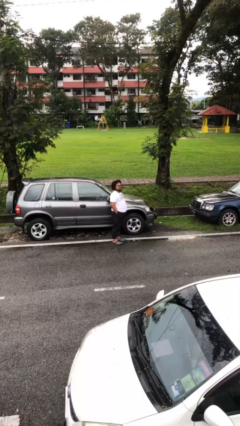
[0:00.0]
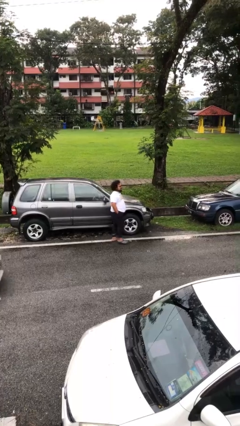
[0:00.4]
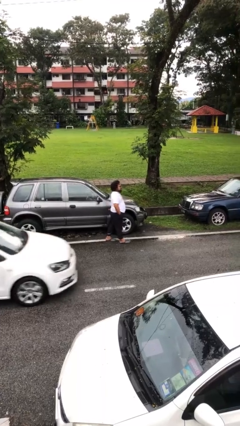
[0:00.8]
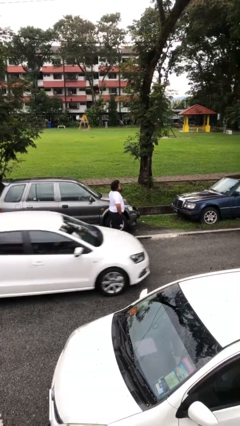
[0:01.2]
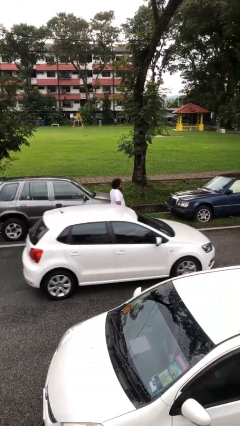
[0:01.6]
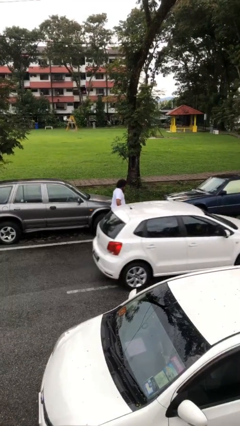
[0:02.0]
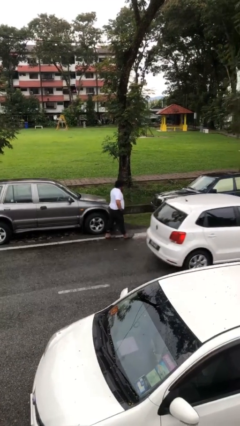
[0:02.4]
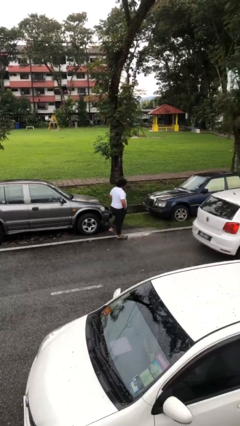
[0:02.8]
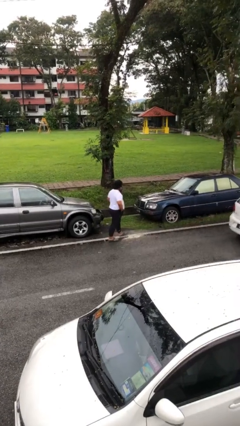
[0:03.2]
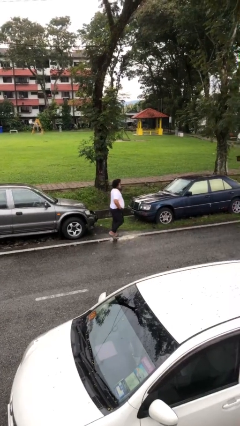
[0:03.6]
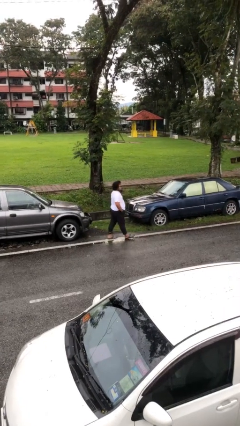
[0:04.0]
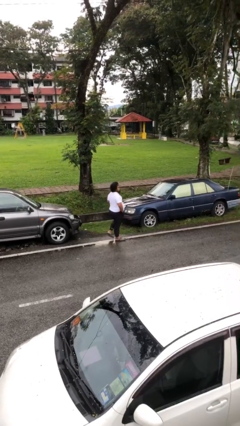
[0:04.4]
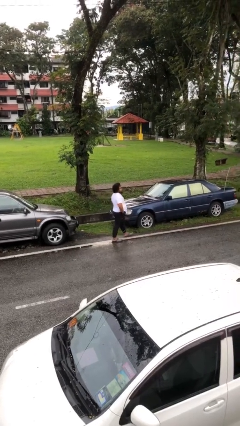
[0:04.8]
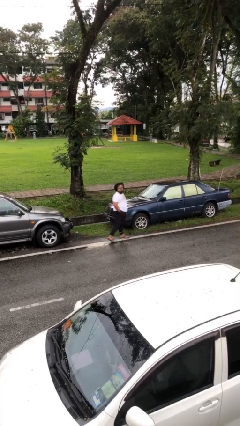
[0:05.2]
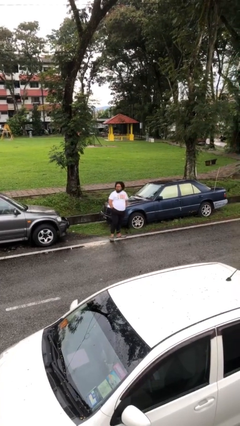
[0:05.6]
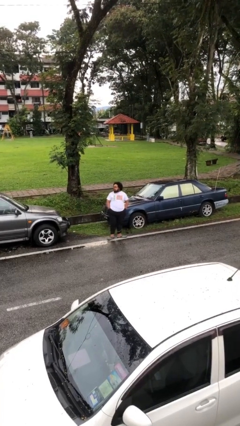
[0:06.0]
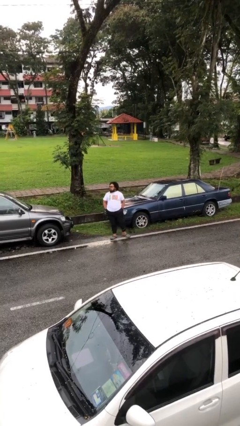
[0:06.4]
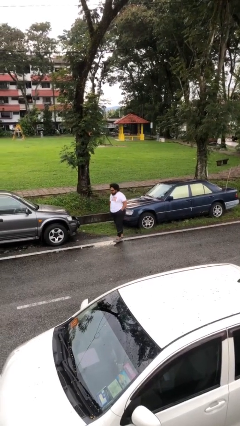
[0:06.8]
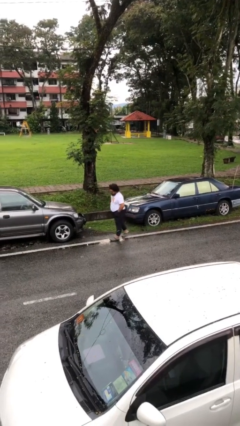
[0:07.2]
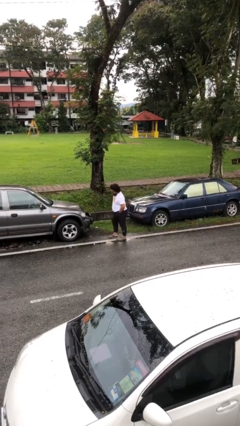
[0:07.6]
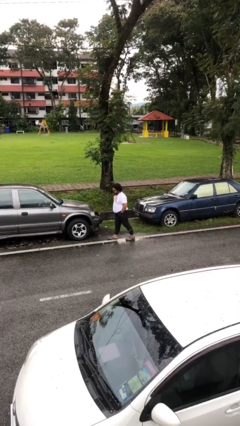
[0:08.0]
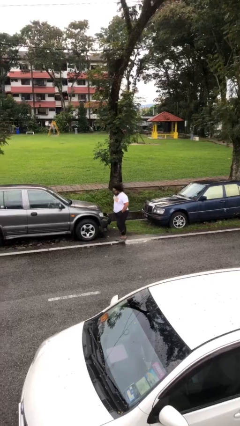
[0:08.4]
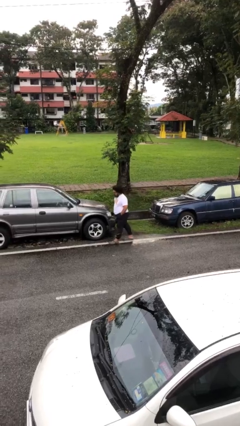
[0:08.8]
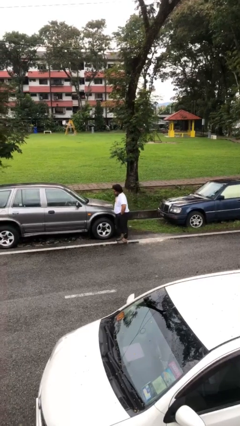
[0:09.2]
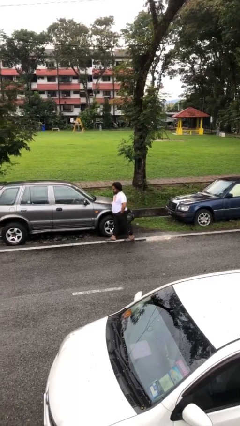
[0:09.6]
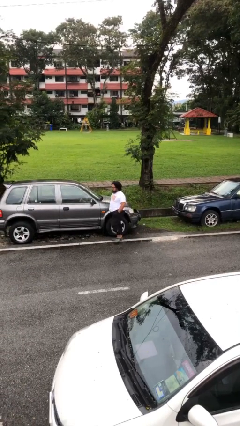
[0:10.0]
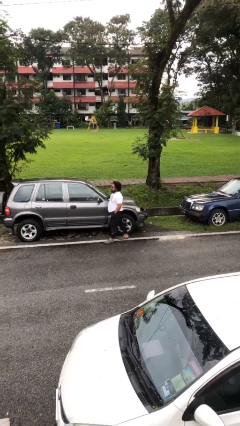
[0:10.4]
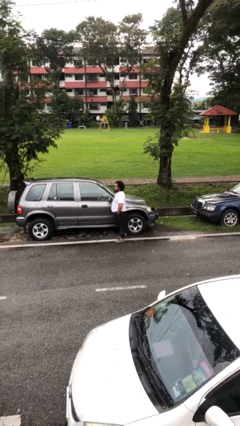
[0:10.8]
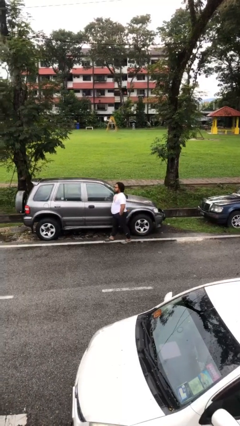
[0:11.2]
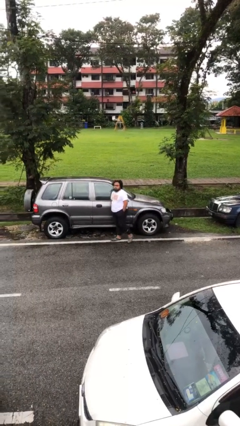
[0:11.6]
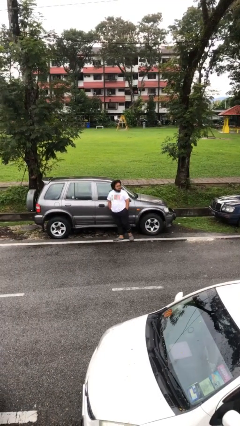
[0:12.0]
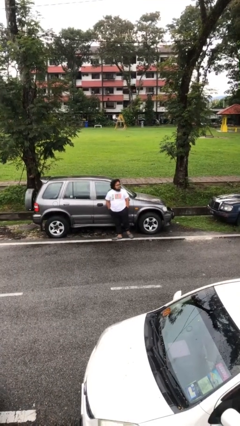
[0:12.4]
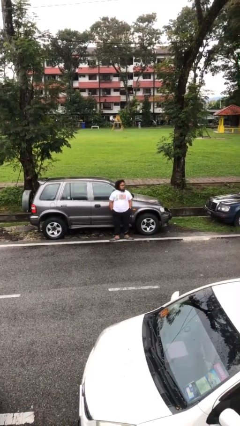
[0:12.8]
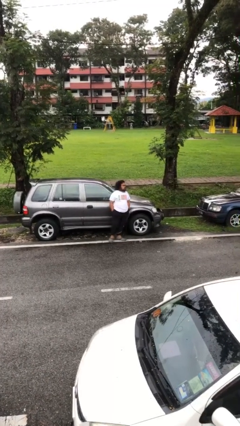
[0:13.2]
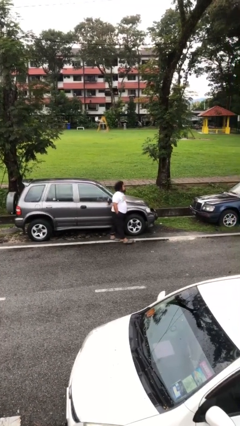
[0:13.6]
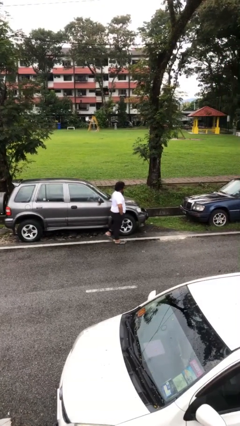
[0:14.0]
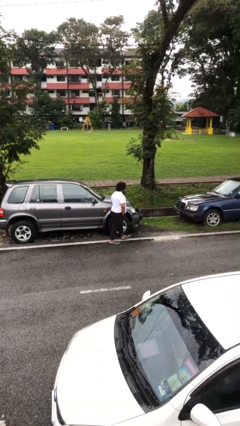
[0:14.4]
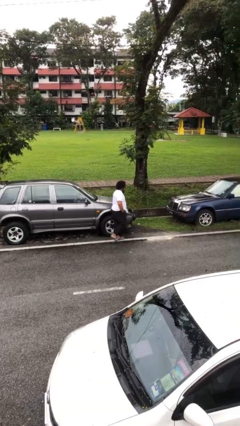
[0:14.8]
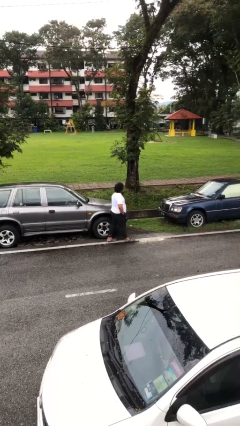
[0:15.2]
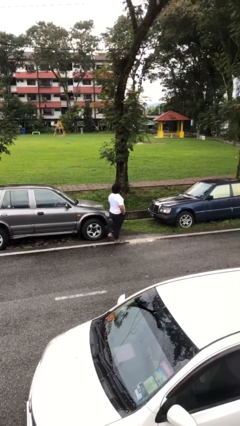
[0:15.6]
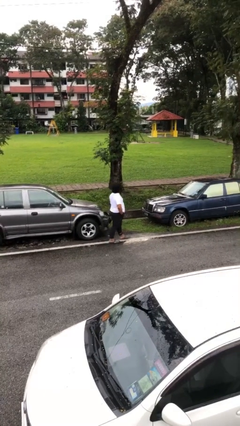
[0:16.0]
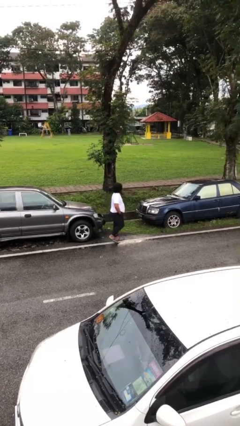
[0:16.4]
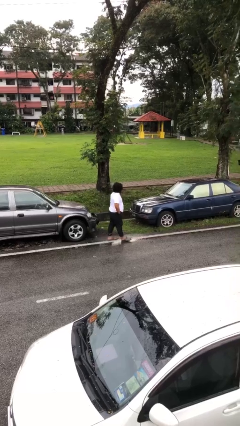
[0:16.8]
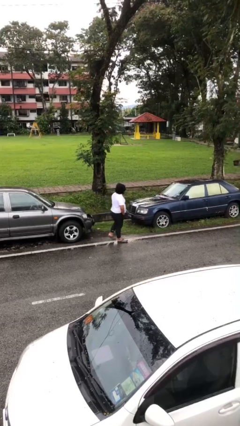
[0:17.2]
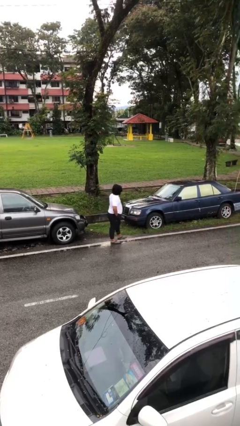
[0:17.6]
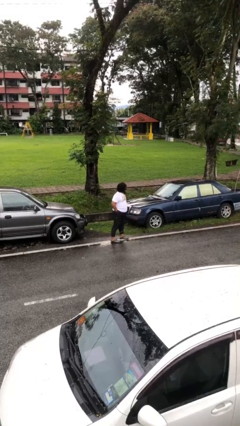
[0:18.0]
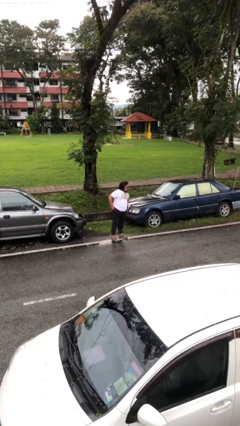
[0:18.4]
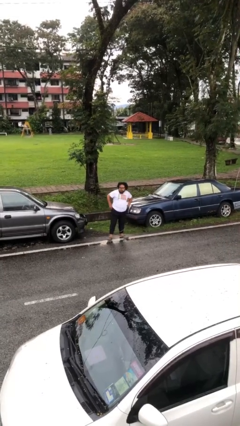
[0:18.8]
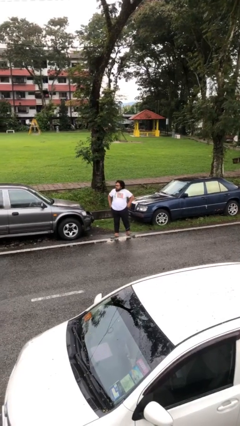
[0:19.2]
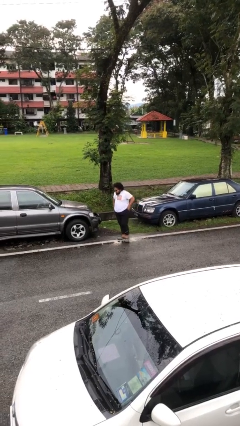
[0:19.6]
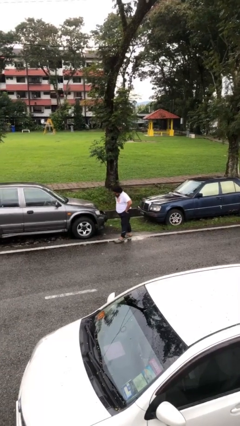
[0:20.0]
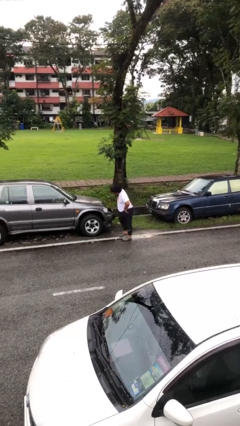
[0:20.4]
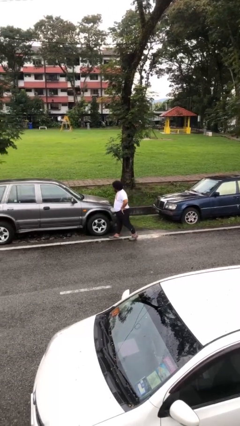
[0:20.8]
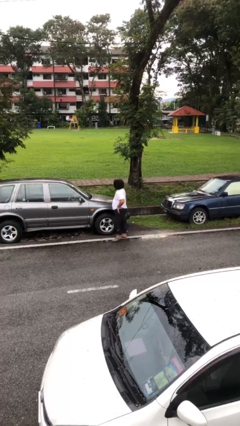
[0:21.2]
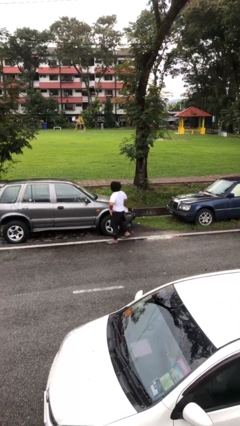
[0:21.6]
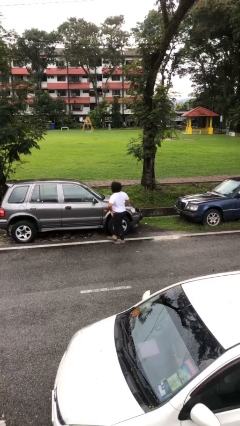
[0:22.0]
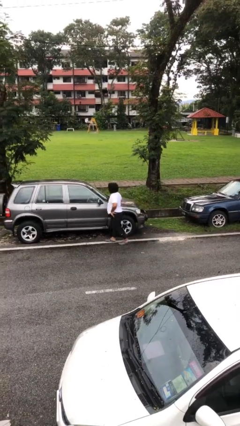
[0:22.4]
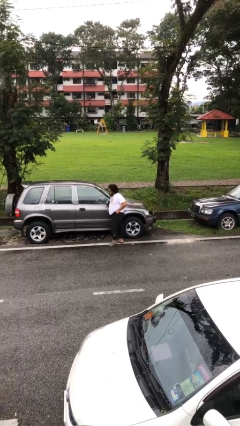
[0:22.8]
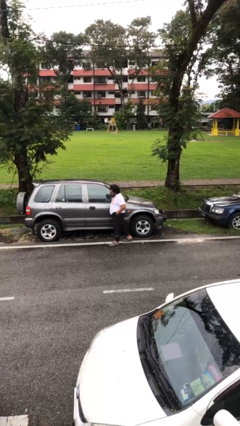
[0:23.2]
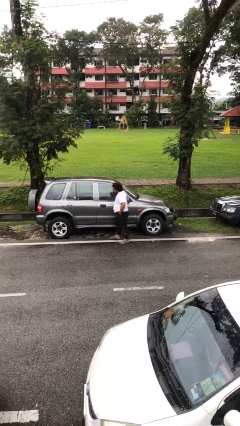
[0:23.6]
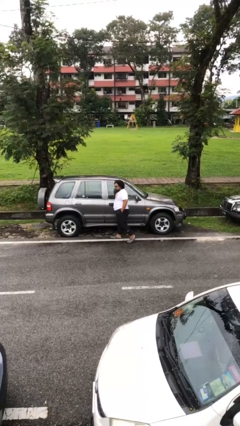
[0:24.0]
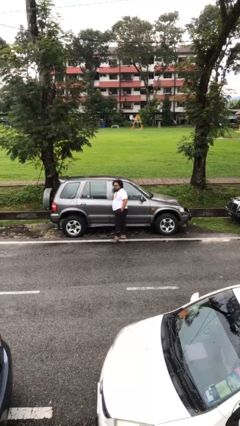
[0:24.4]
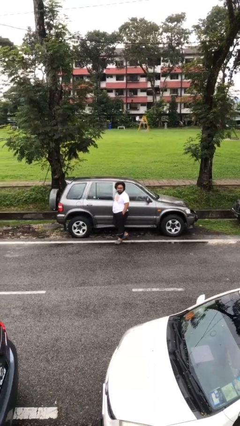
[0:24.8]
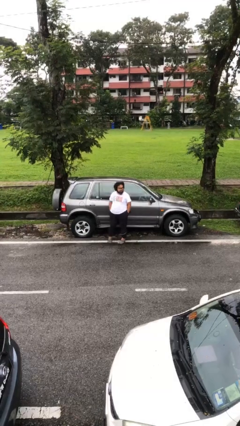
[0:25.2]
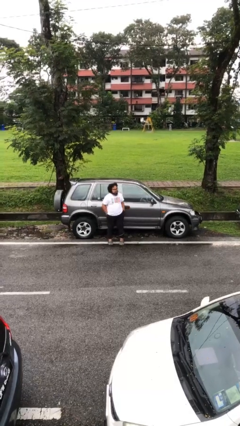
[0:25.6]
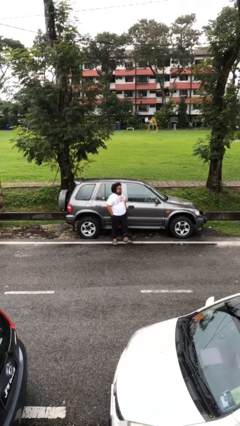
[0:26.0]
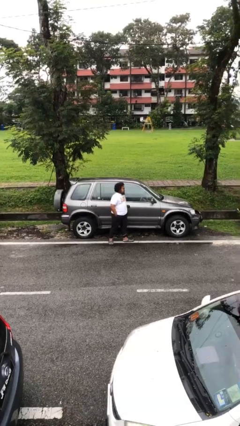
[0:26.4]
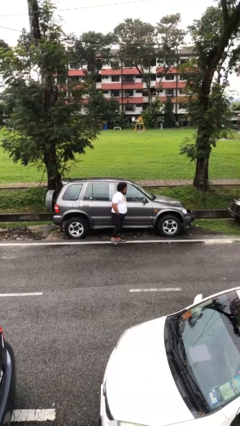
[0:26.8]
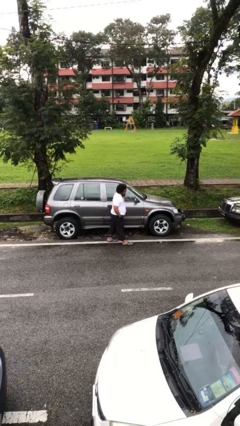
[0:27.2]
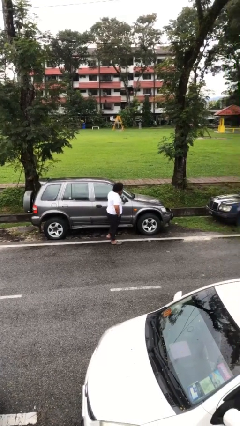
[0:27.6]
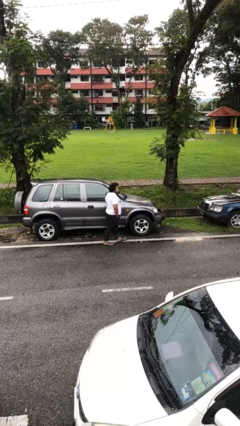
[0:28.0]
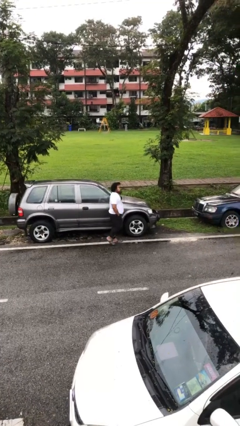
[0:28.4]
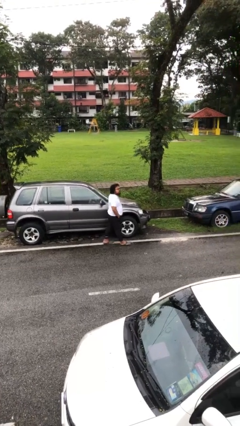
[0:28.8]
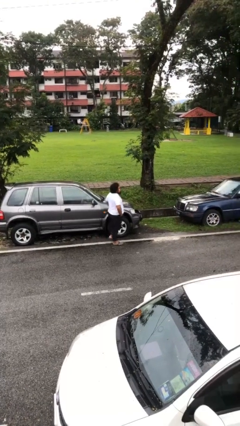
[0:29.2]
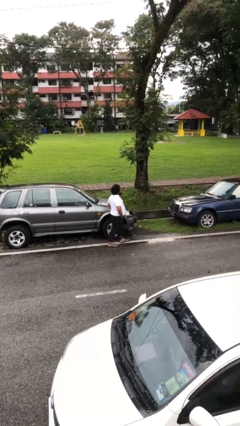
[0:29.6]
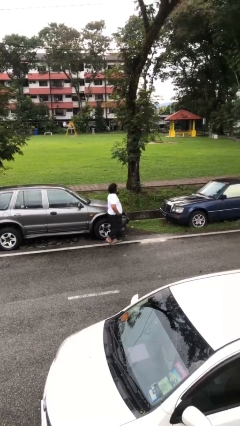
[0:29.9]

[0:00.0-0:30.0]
person walks

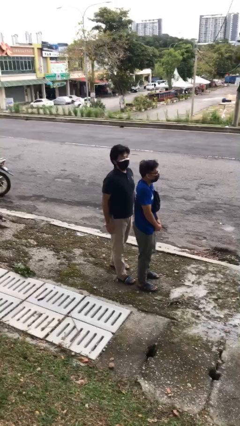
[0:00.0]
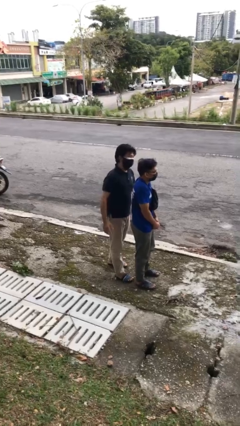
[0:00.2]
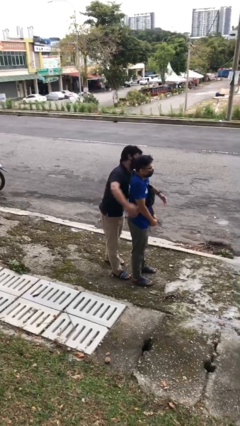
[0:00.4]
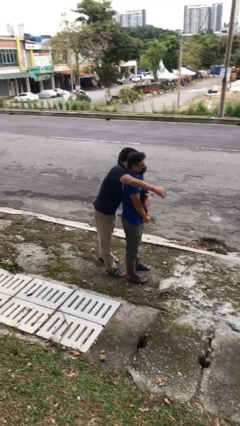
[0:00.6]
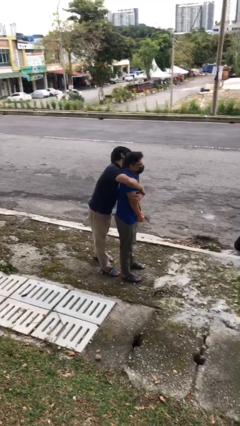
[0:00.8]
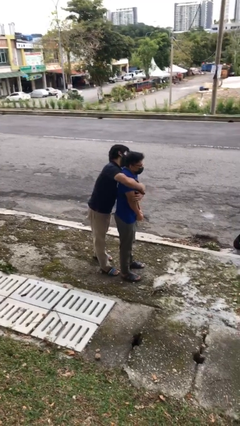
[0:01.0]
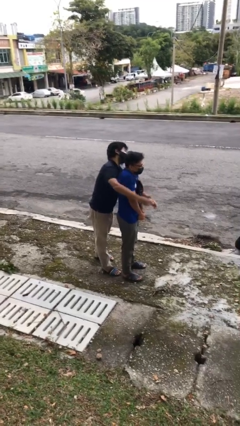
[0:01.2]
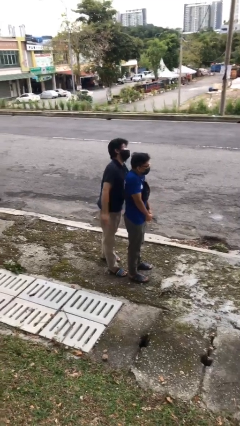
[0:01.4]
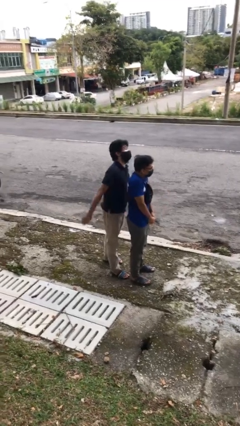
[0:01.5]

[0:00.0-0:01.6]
person hugs person from behind

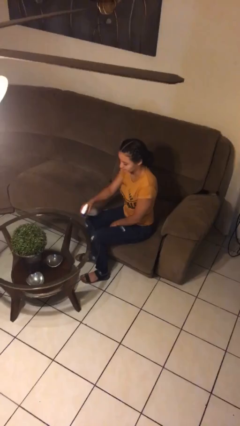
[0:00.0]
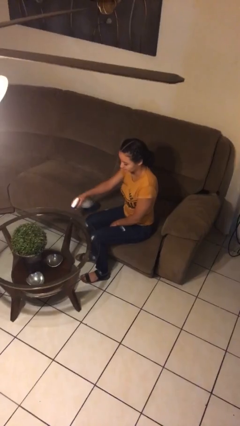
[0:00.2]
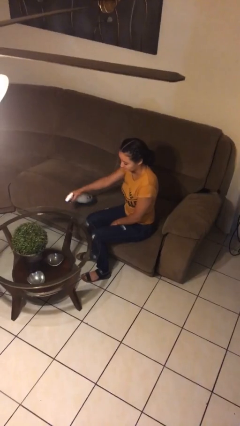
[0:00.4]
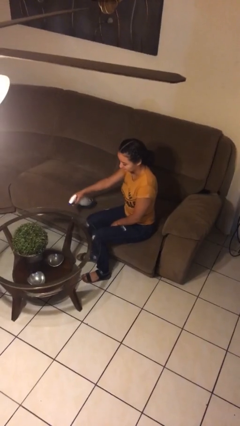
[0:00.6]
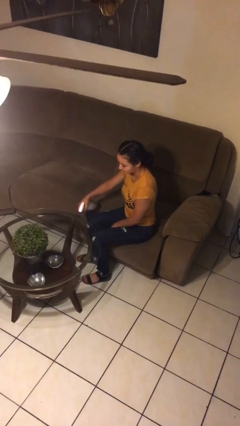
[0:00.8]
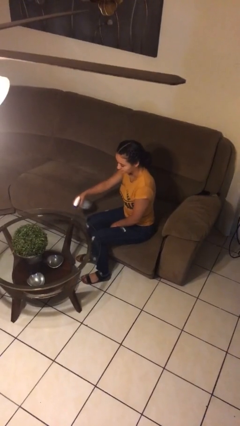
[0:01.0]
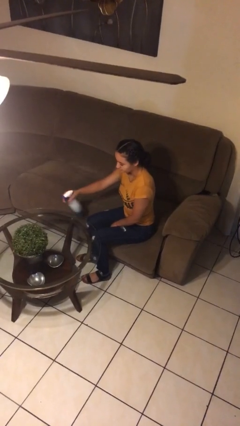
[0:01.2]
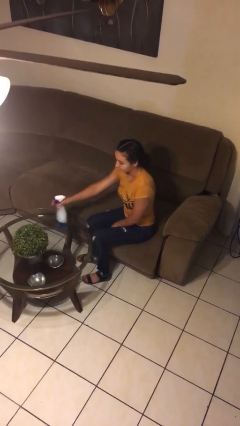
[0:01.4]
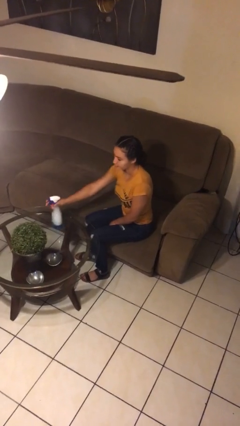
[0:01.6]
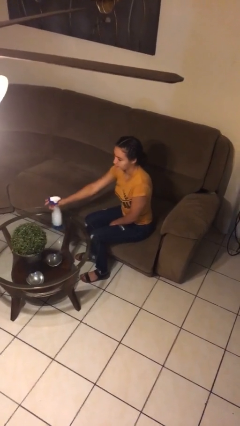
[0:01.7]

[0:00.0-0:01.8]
person sprays from bottle
